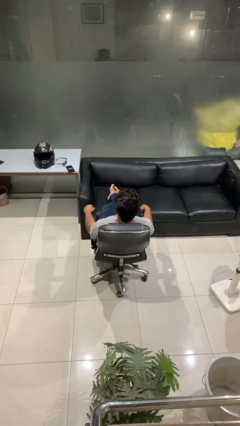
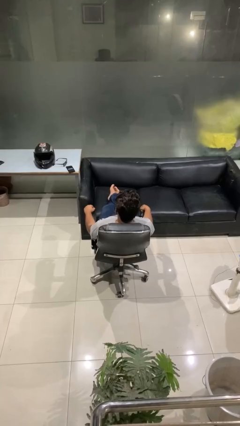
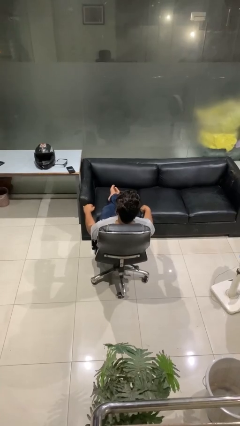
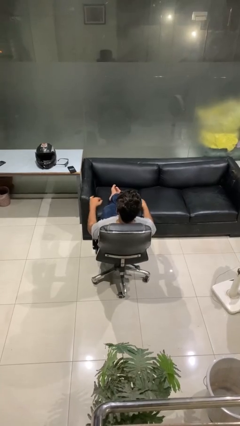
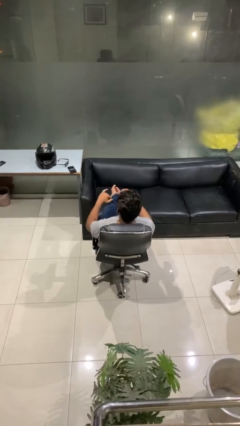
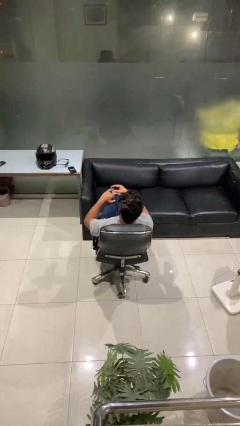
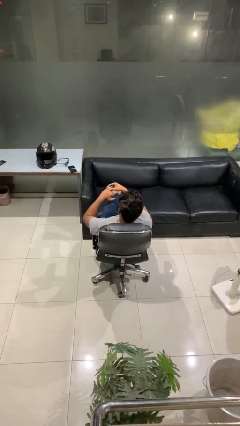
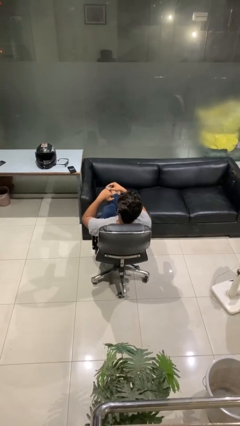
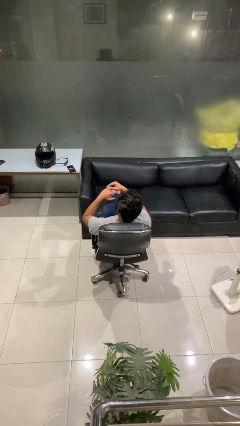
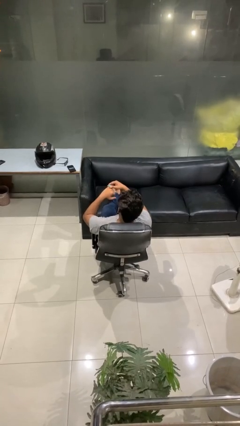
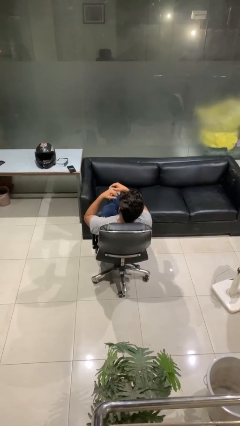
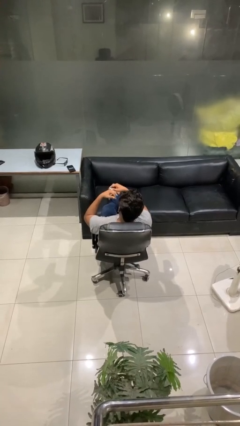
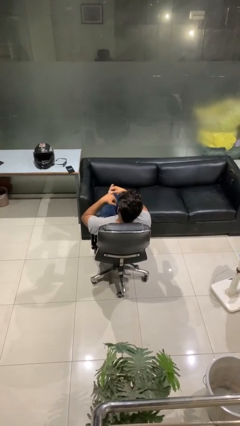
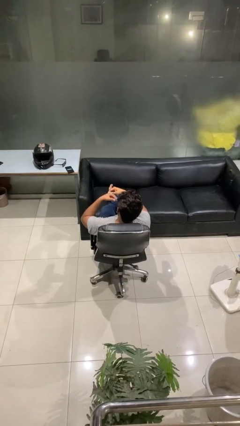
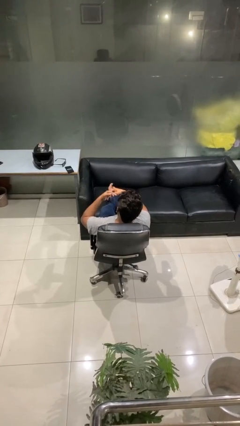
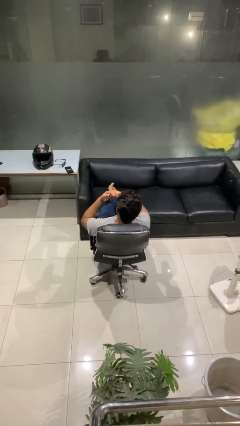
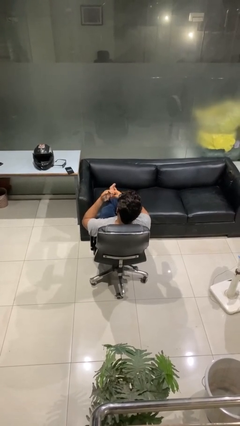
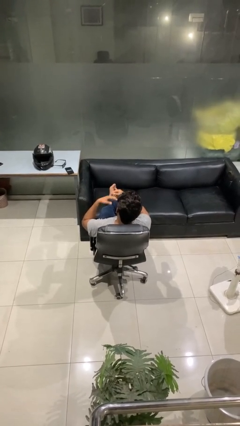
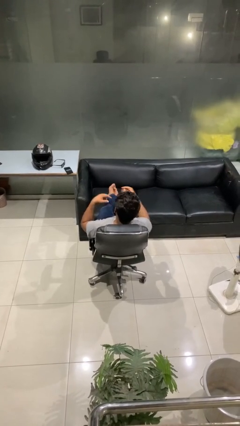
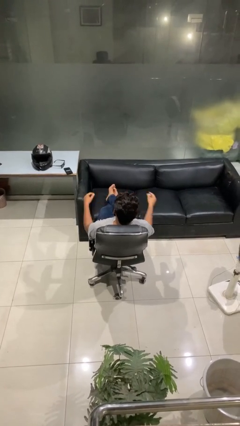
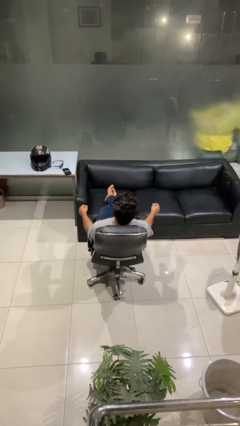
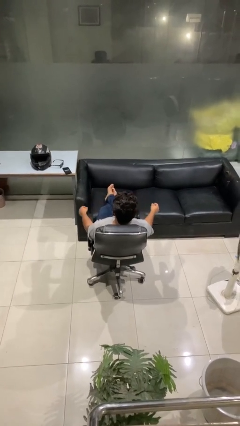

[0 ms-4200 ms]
person takes off ring

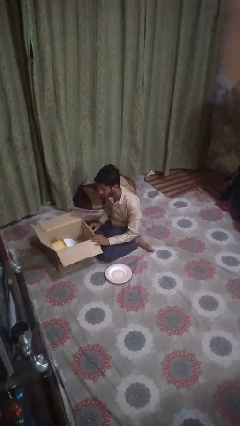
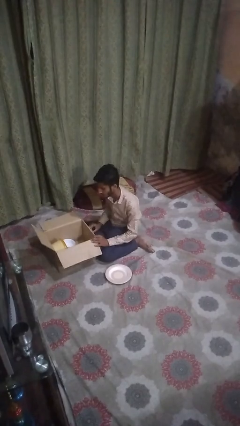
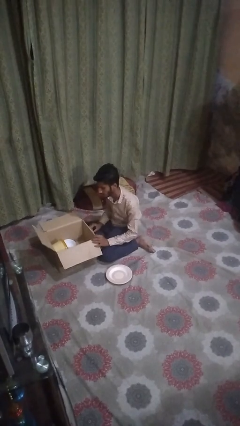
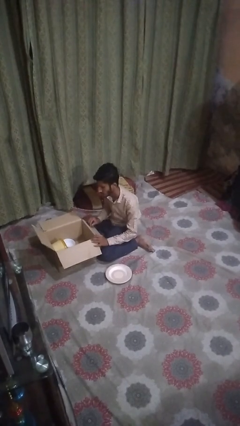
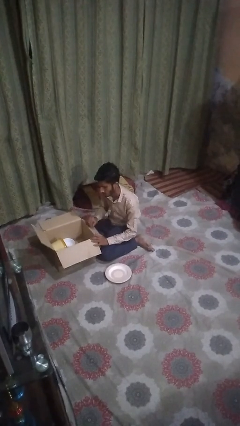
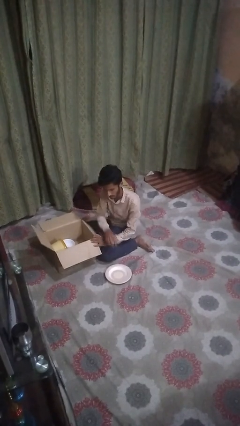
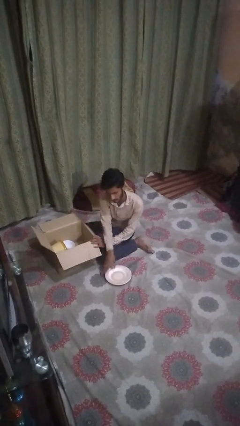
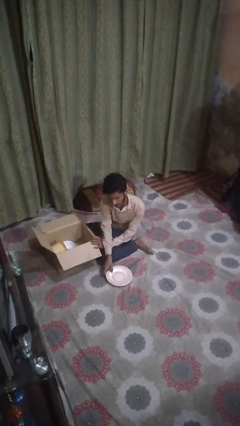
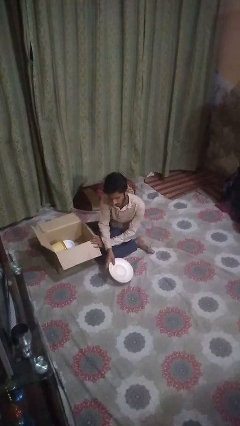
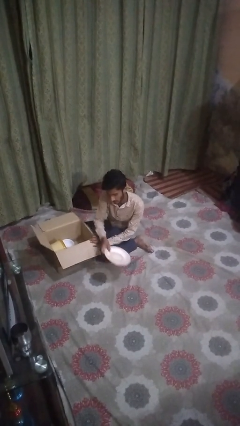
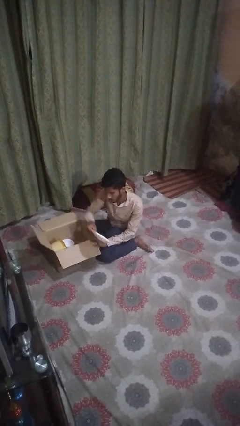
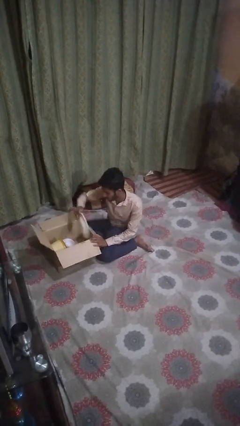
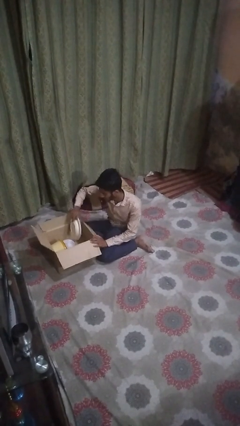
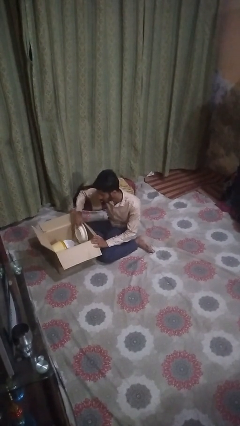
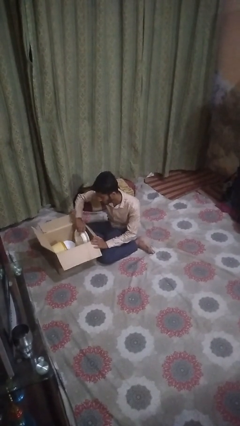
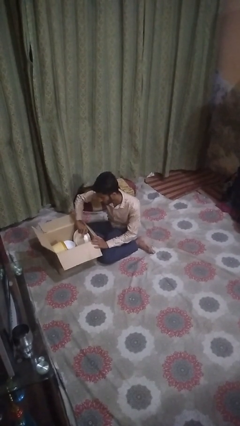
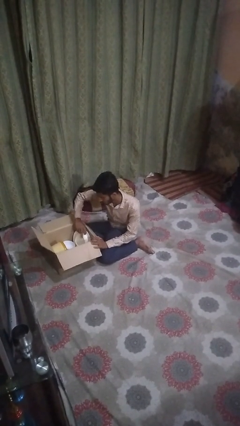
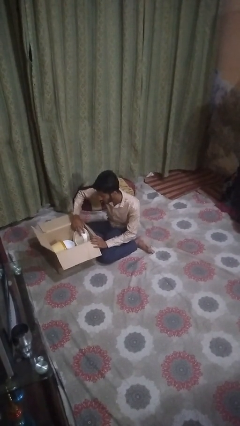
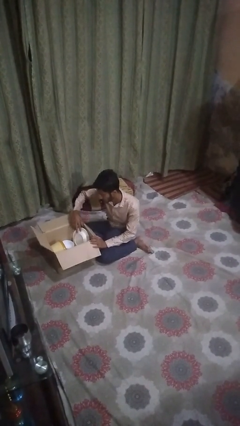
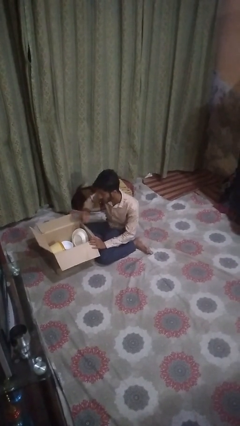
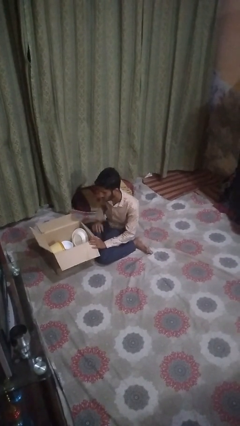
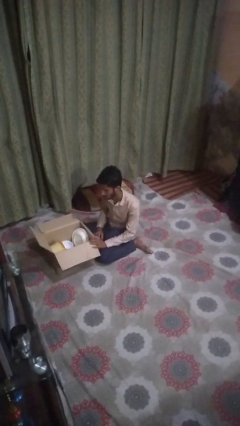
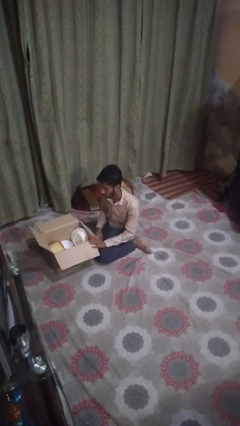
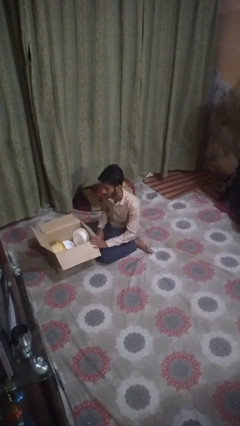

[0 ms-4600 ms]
person puts object into box

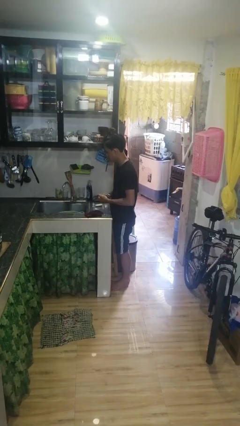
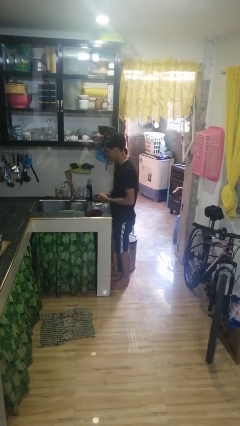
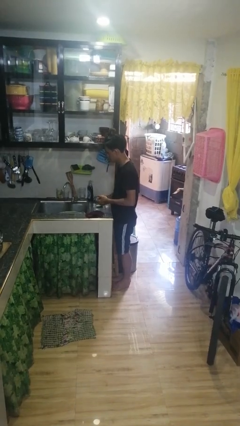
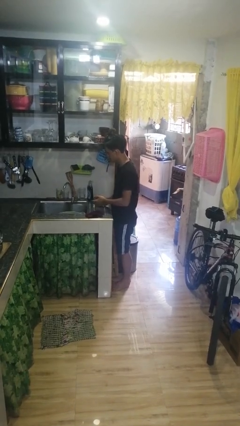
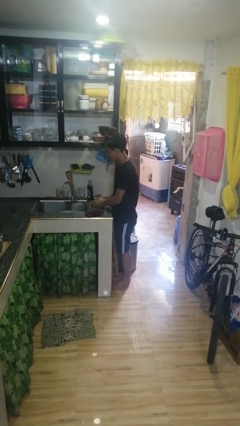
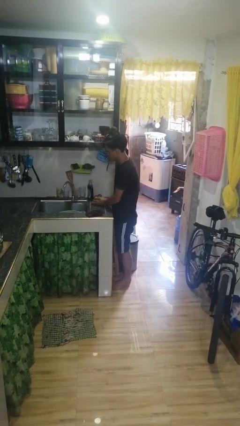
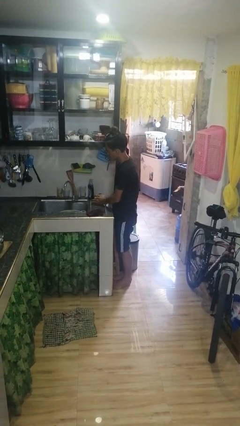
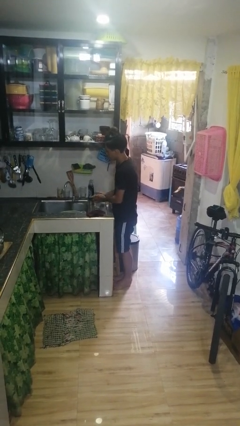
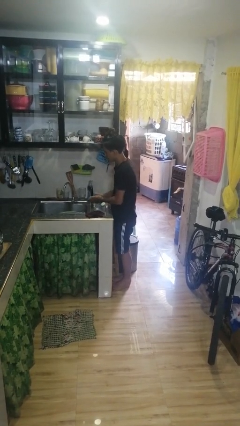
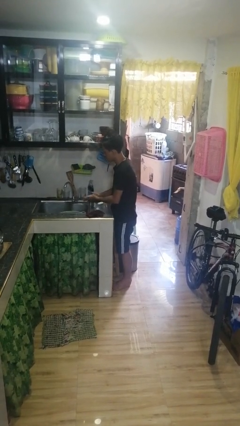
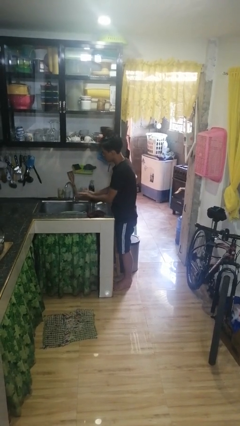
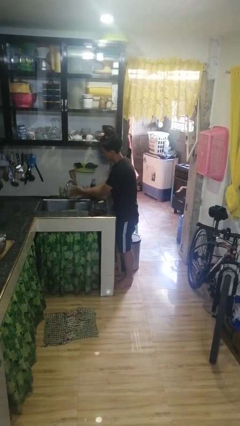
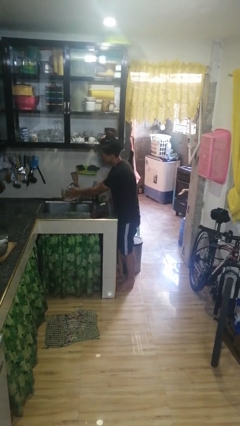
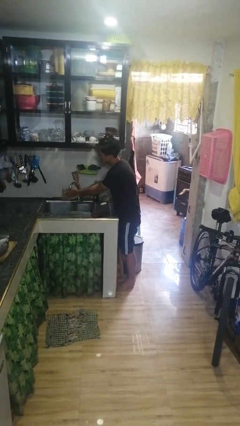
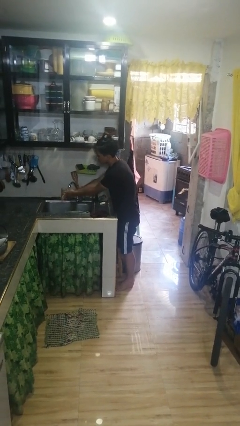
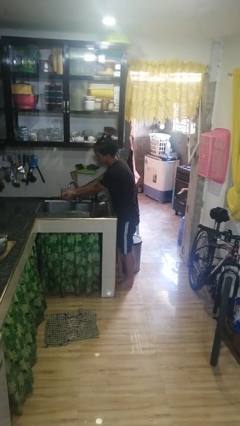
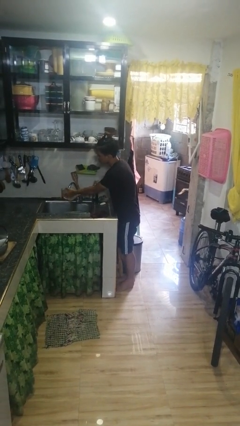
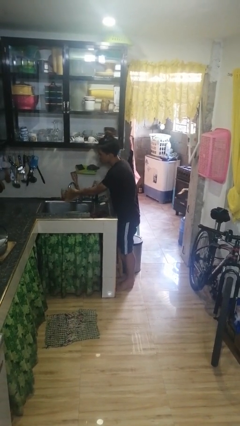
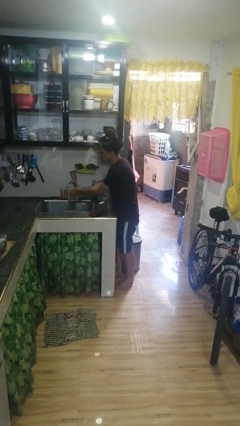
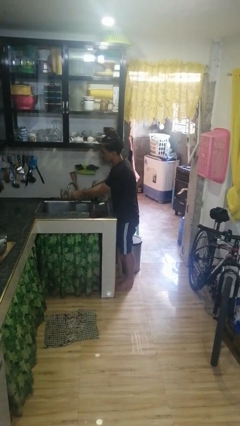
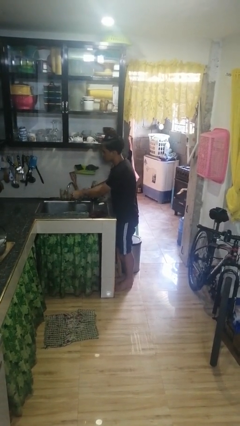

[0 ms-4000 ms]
person washes hands

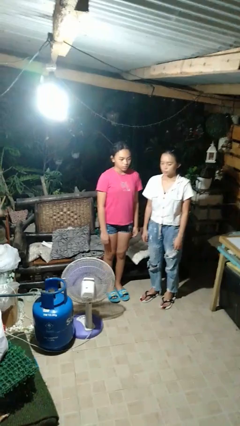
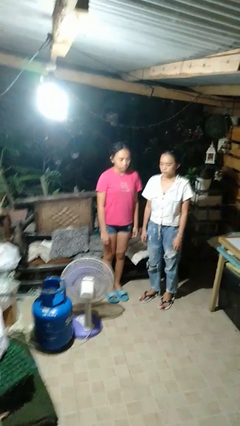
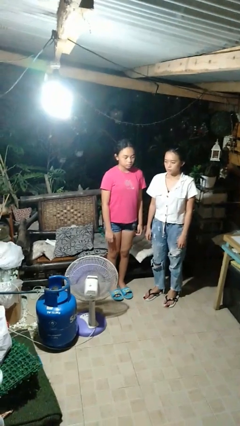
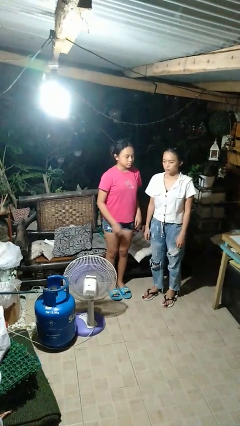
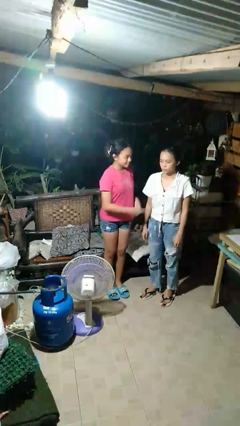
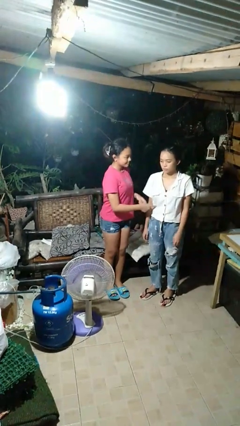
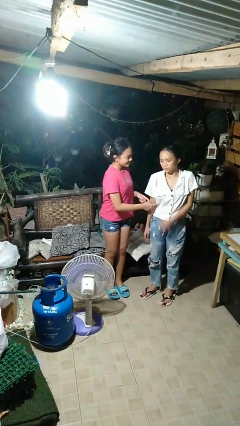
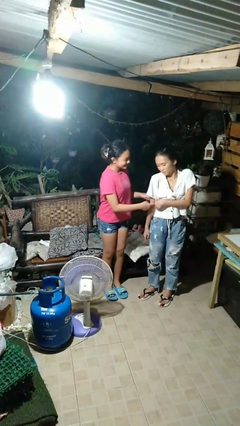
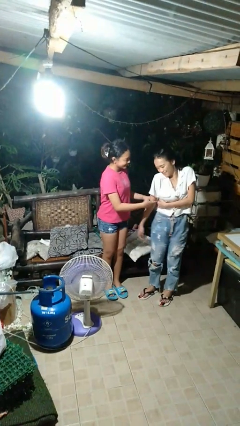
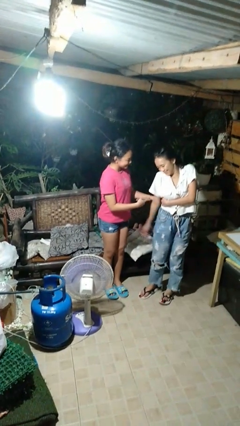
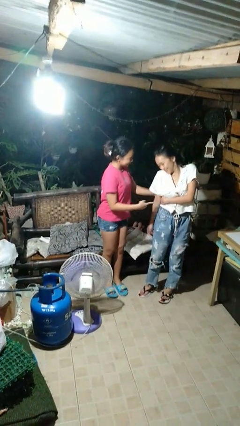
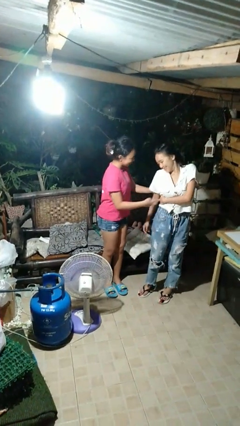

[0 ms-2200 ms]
person tickles person

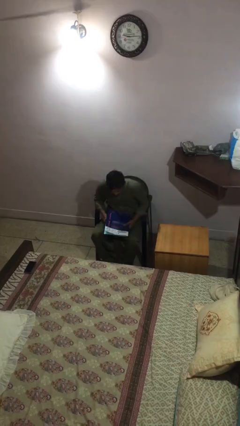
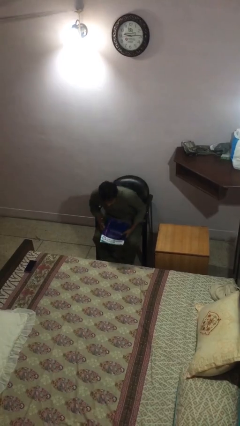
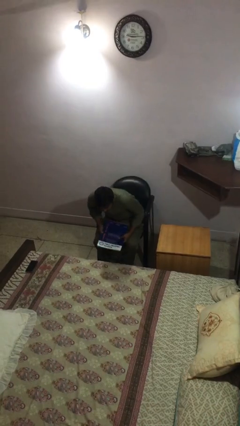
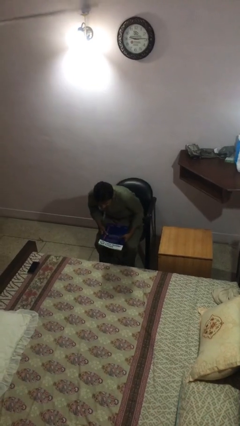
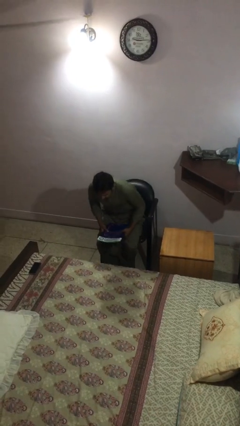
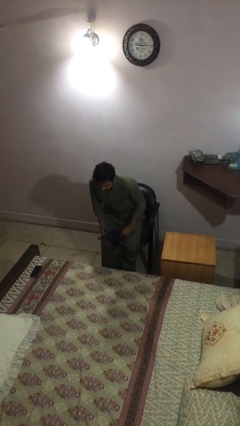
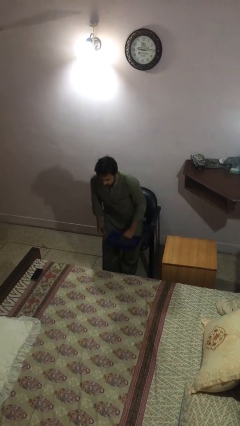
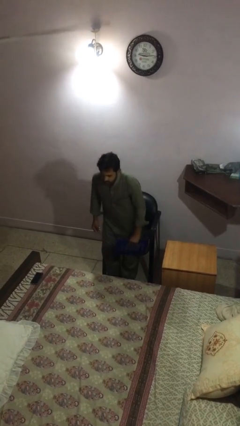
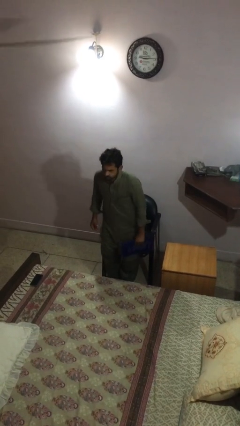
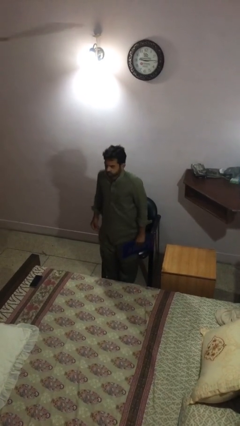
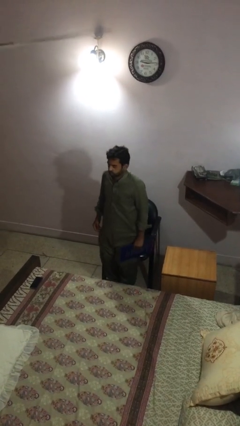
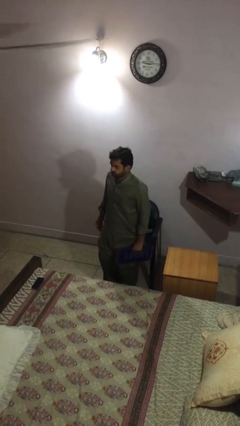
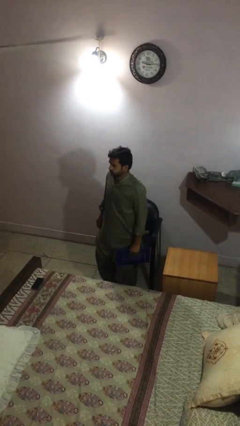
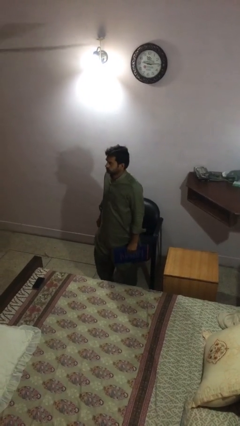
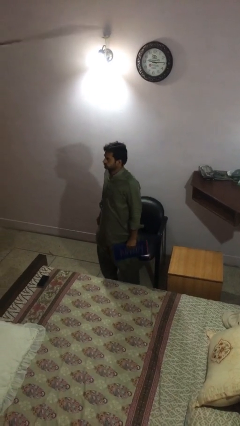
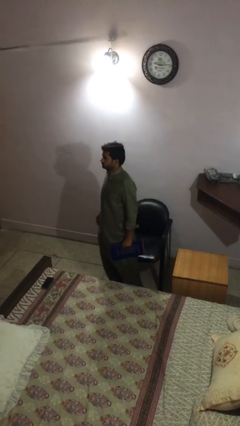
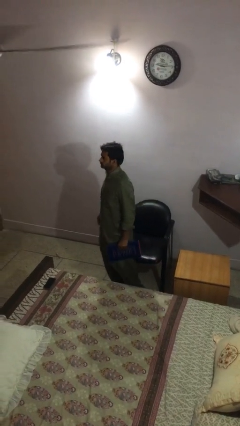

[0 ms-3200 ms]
person stands up
